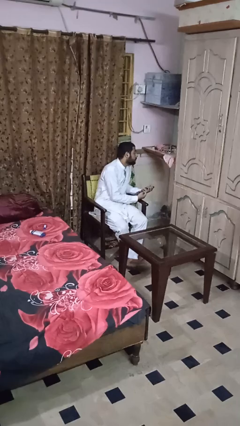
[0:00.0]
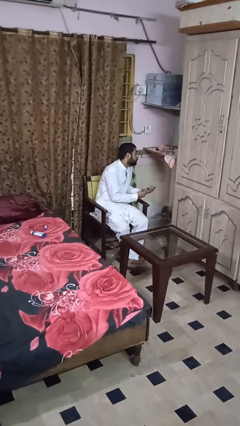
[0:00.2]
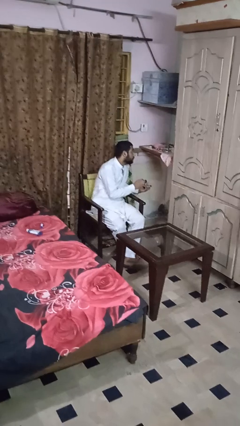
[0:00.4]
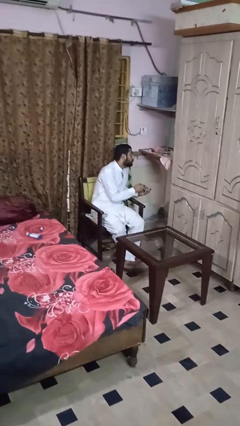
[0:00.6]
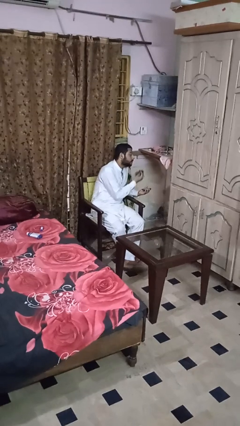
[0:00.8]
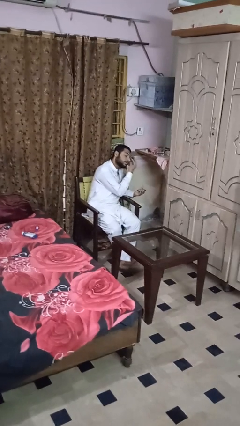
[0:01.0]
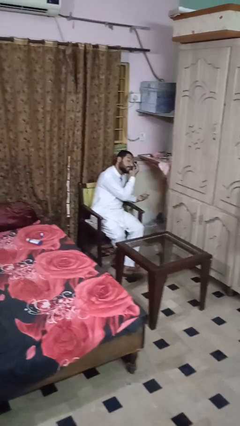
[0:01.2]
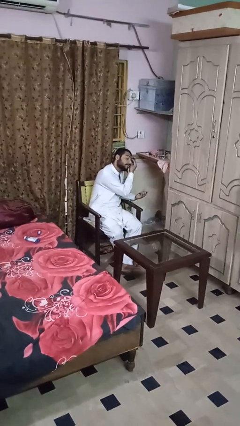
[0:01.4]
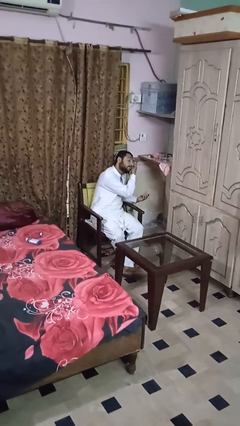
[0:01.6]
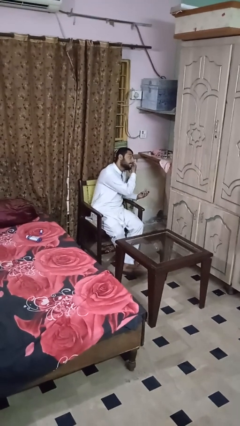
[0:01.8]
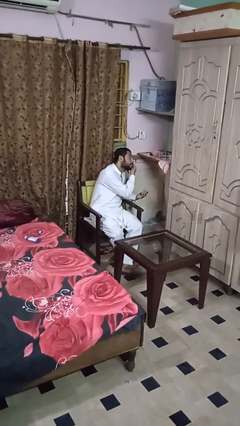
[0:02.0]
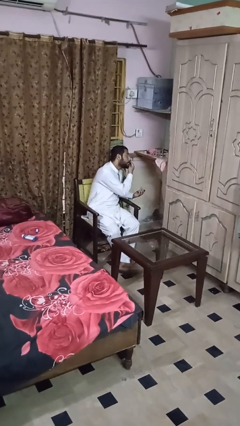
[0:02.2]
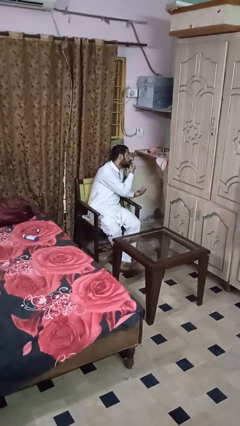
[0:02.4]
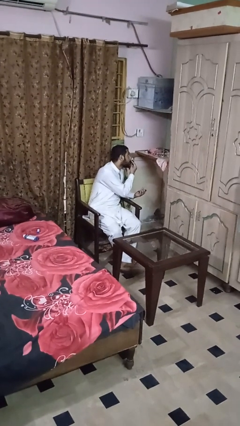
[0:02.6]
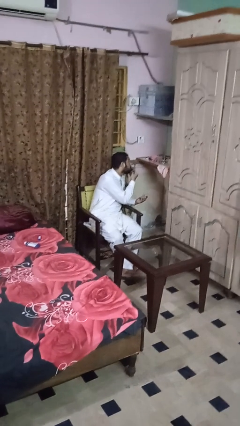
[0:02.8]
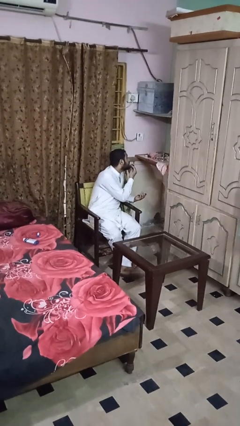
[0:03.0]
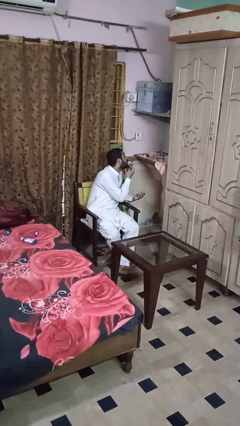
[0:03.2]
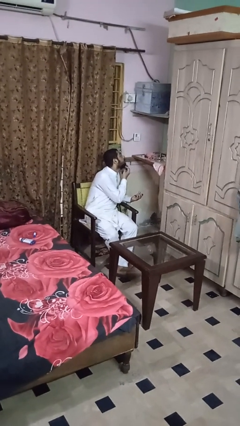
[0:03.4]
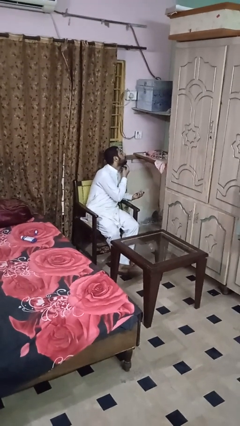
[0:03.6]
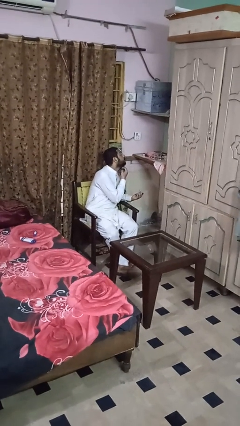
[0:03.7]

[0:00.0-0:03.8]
person applies foundation makeup

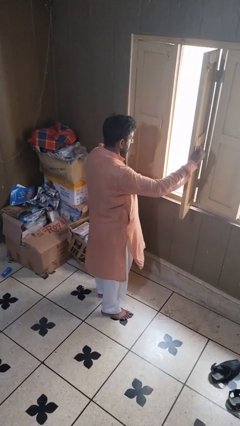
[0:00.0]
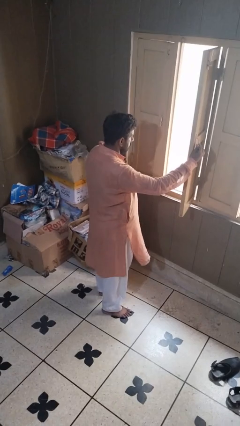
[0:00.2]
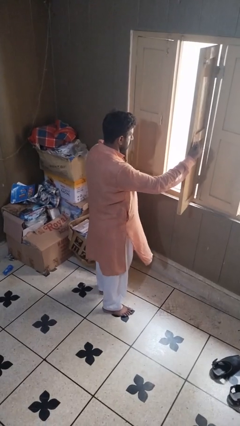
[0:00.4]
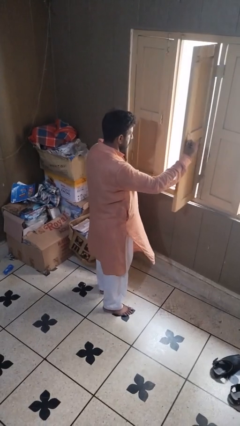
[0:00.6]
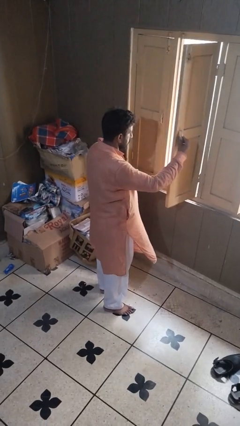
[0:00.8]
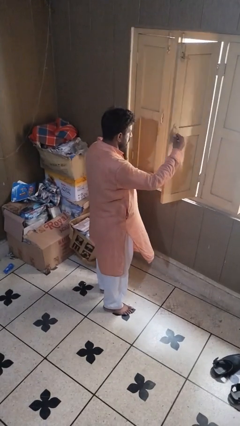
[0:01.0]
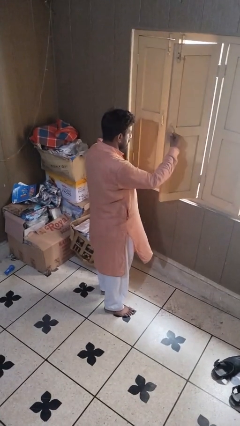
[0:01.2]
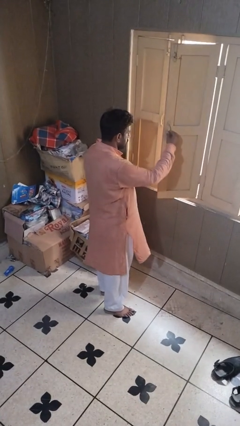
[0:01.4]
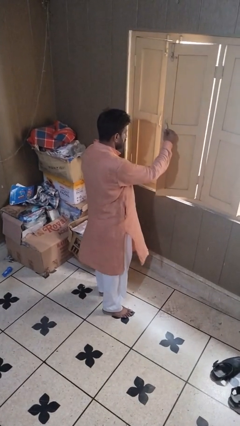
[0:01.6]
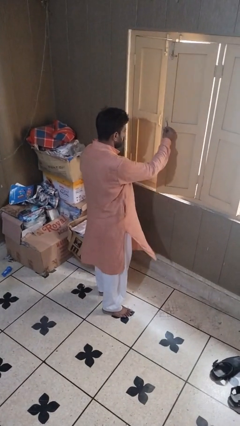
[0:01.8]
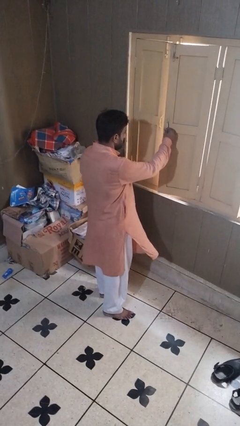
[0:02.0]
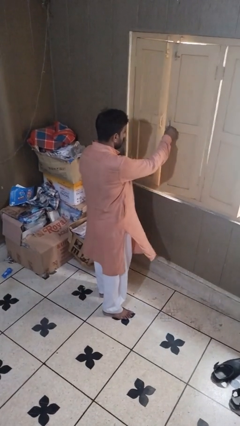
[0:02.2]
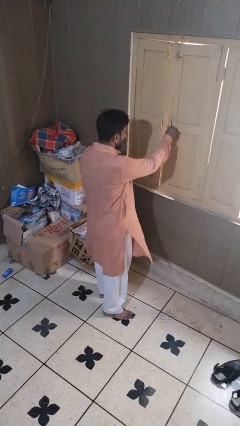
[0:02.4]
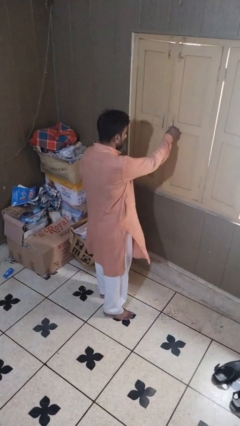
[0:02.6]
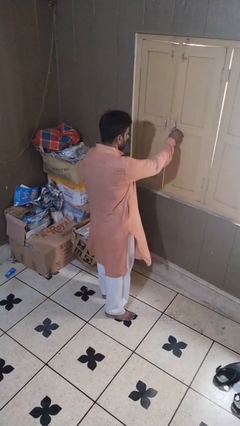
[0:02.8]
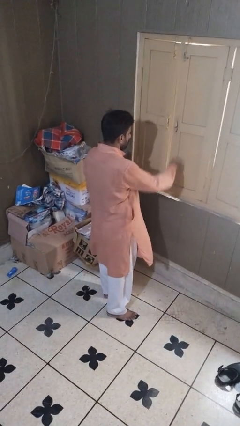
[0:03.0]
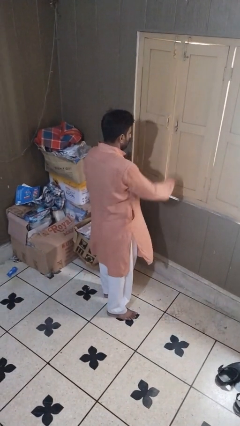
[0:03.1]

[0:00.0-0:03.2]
person closes home window

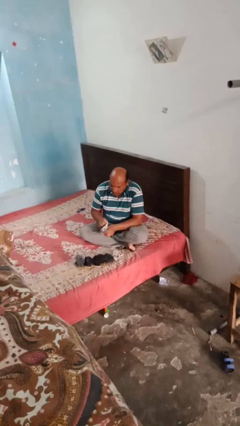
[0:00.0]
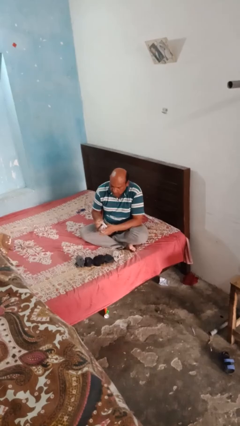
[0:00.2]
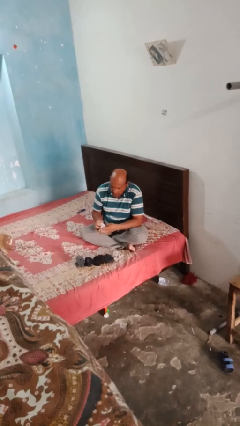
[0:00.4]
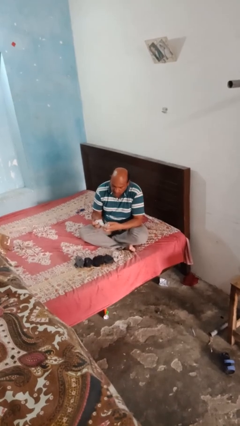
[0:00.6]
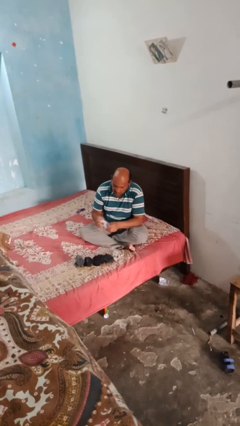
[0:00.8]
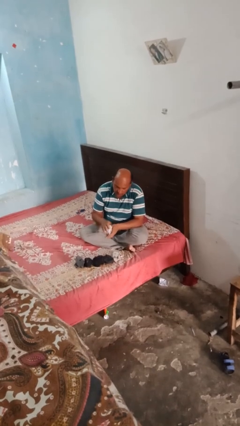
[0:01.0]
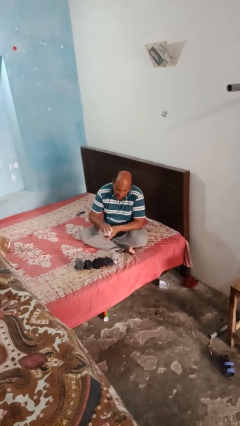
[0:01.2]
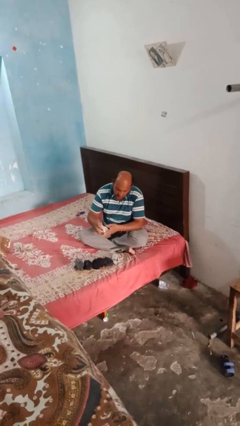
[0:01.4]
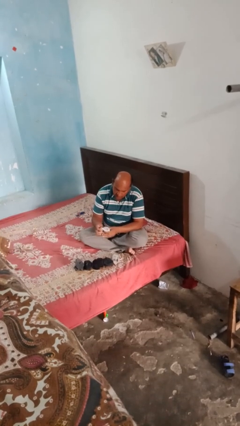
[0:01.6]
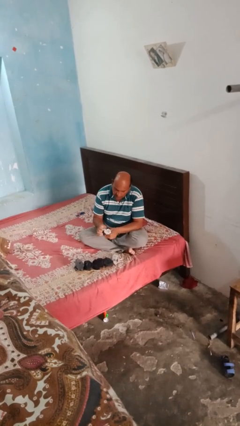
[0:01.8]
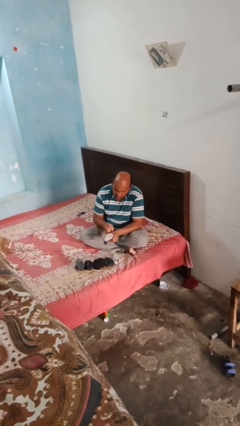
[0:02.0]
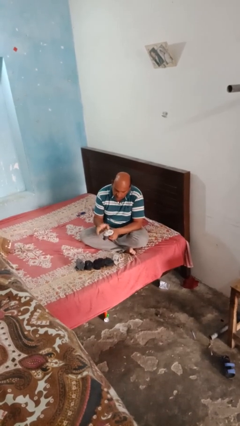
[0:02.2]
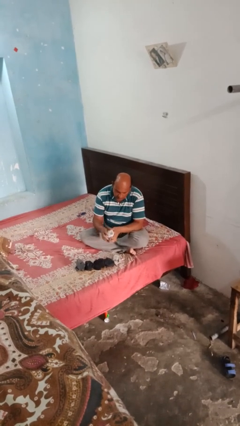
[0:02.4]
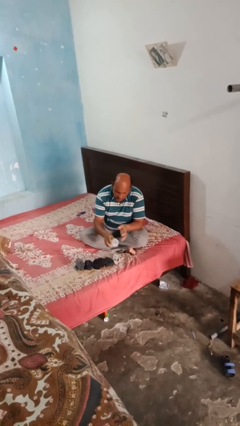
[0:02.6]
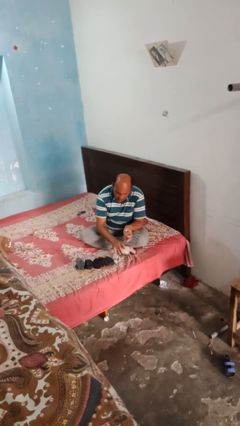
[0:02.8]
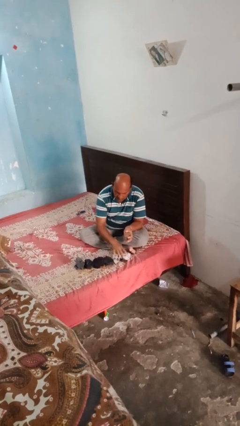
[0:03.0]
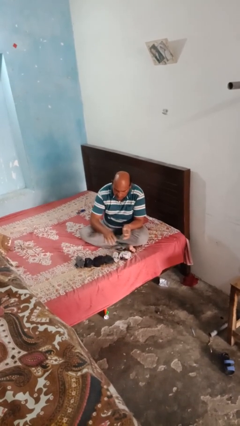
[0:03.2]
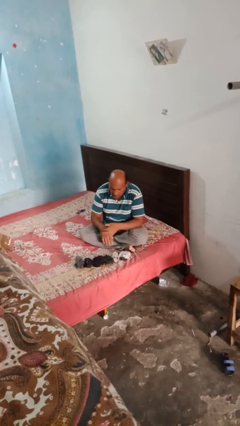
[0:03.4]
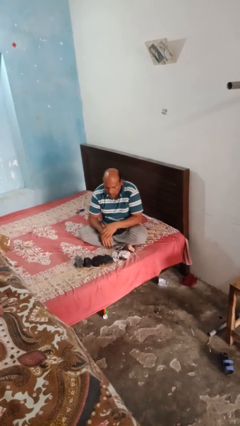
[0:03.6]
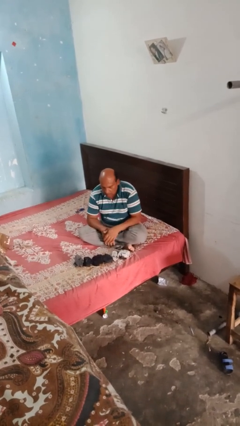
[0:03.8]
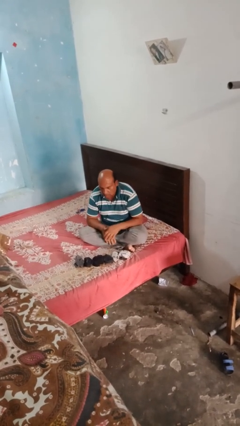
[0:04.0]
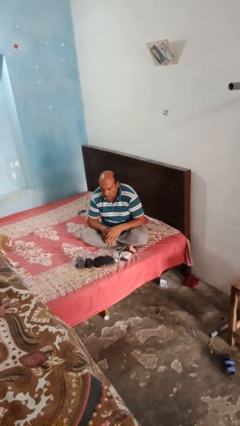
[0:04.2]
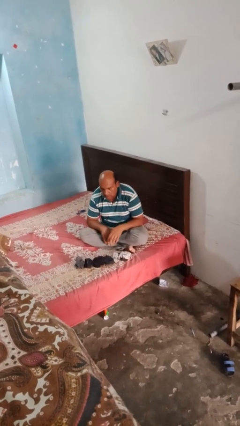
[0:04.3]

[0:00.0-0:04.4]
person folds socks

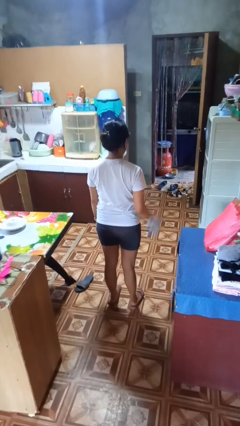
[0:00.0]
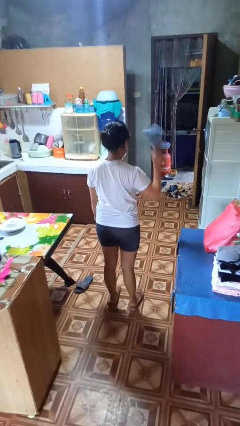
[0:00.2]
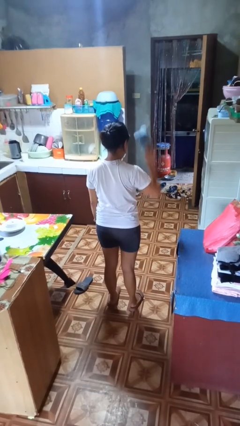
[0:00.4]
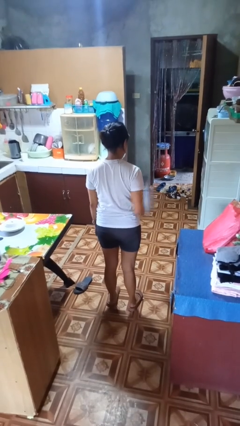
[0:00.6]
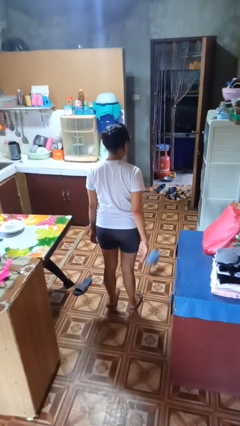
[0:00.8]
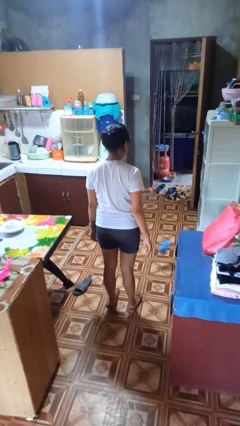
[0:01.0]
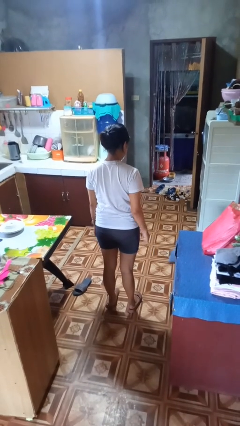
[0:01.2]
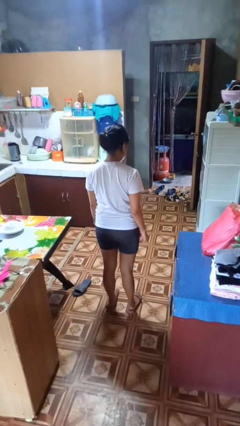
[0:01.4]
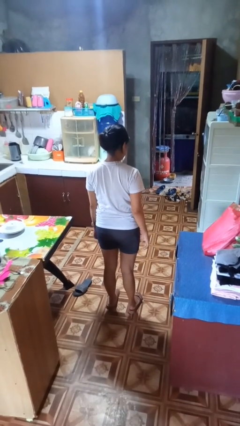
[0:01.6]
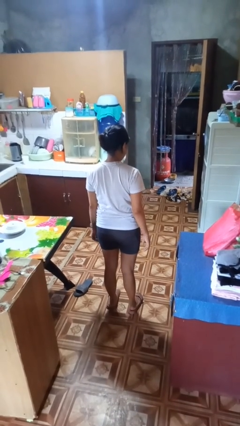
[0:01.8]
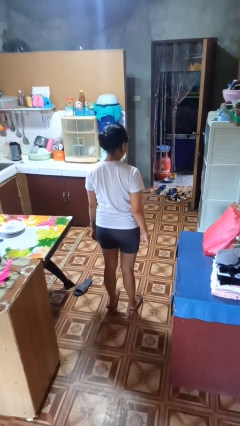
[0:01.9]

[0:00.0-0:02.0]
person throws object to ground

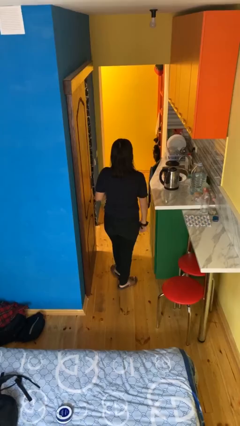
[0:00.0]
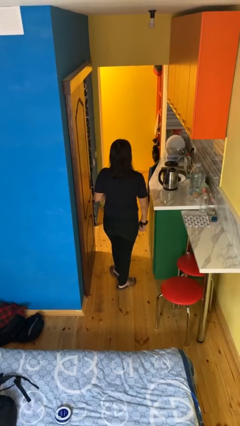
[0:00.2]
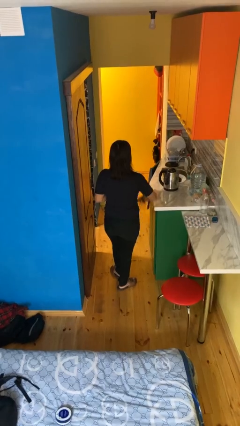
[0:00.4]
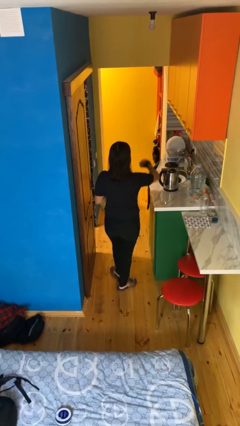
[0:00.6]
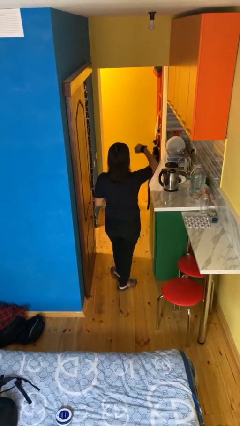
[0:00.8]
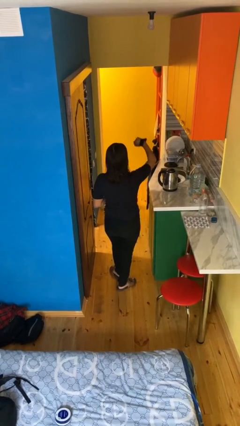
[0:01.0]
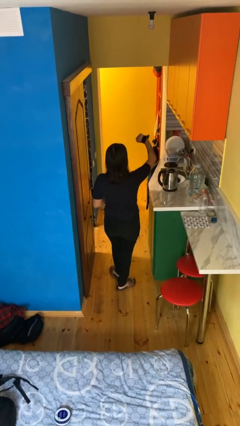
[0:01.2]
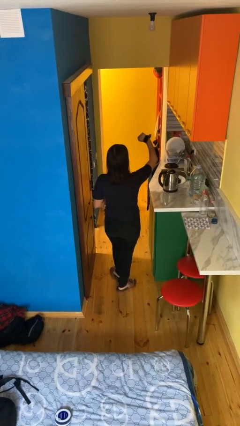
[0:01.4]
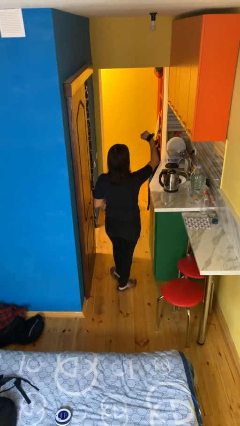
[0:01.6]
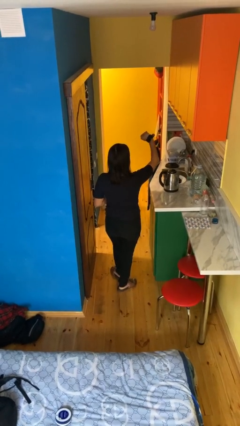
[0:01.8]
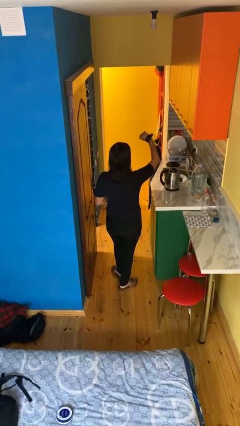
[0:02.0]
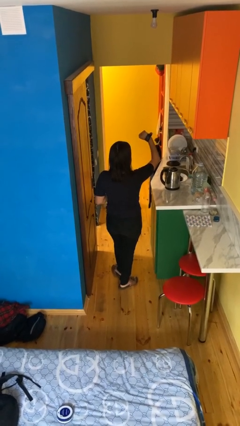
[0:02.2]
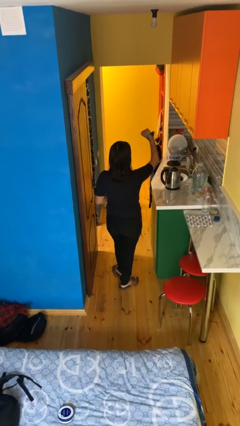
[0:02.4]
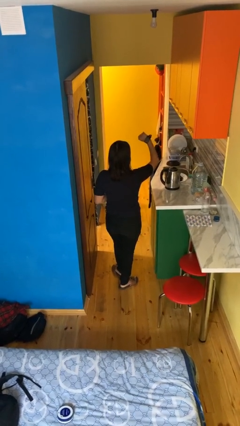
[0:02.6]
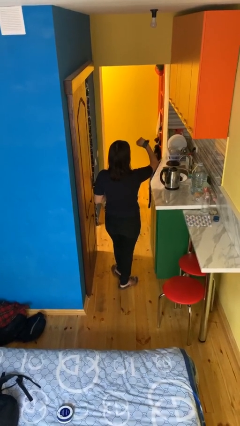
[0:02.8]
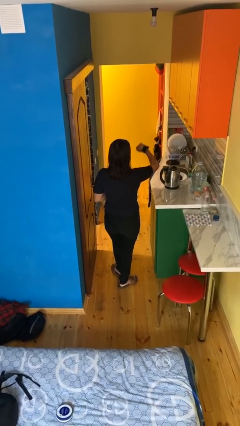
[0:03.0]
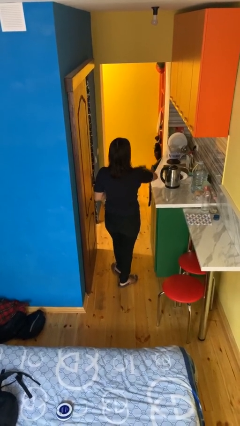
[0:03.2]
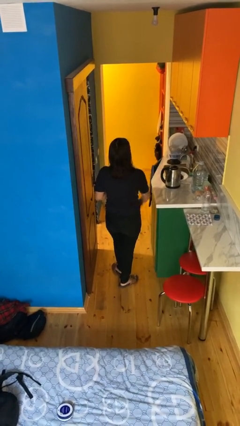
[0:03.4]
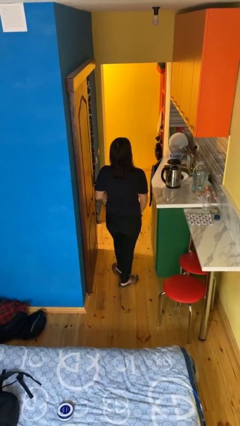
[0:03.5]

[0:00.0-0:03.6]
person looks at wristwatch

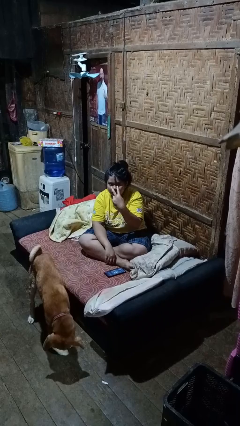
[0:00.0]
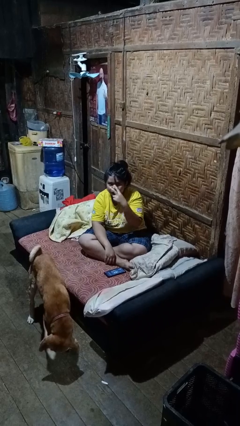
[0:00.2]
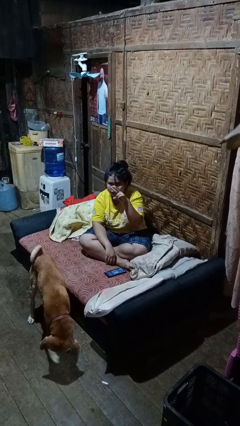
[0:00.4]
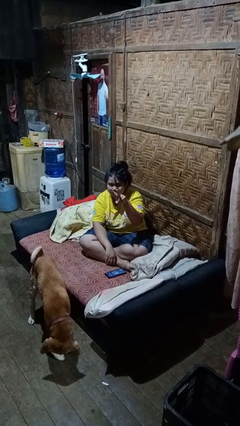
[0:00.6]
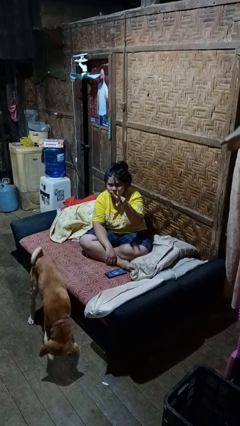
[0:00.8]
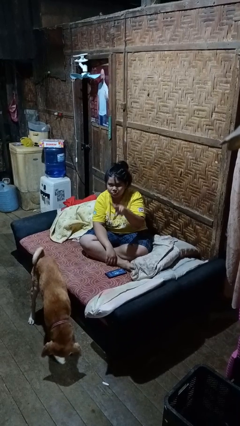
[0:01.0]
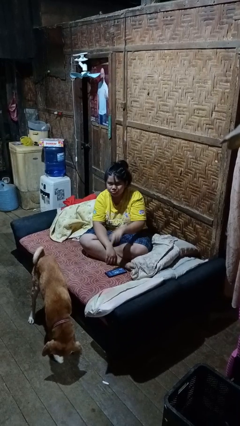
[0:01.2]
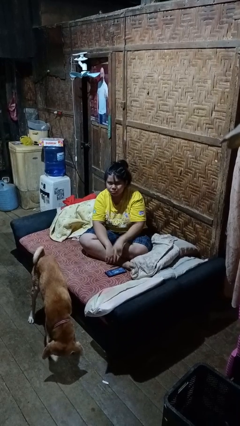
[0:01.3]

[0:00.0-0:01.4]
person gestures watch closely
